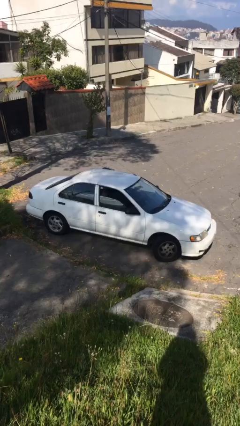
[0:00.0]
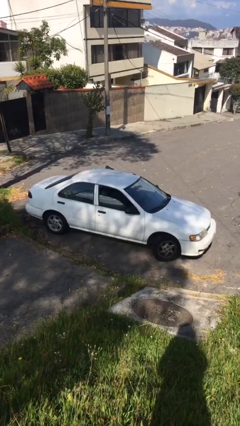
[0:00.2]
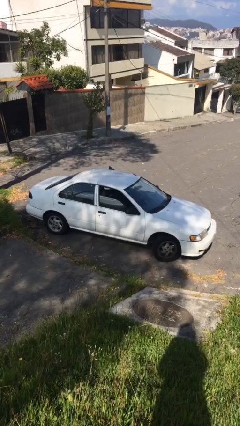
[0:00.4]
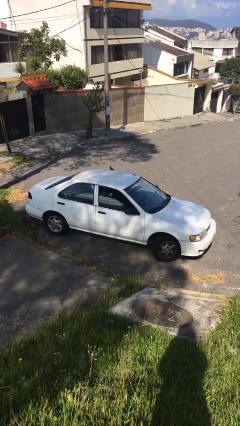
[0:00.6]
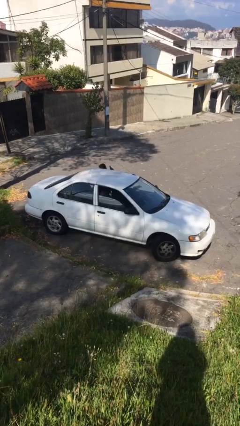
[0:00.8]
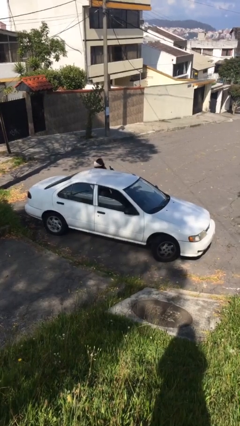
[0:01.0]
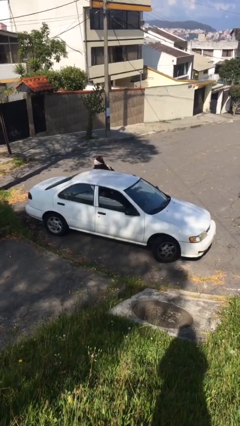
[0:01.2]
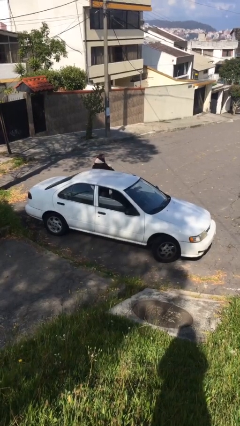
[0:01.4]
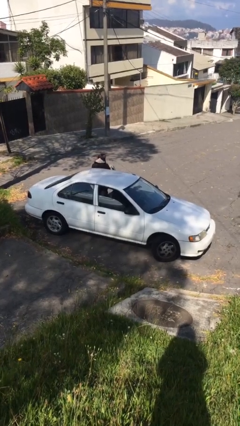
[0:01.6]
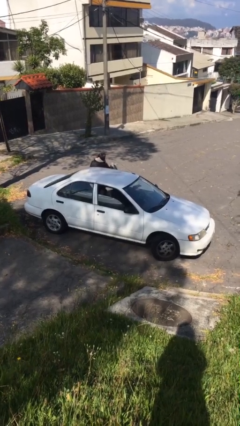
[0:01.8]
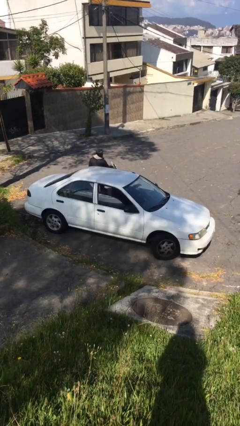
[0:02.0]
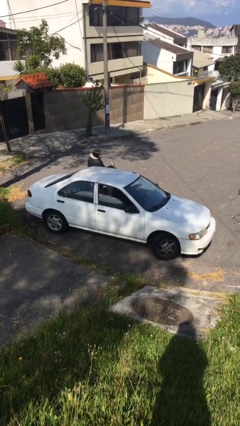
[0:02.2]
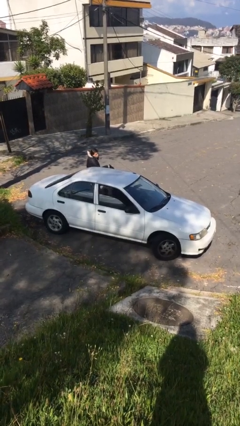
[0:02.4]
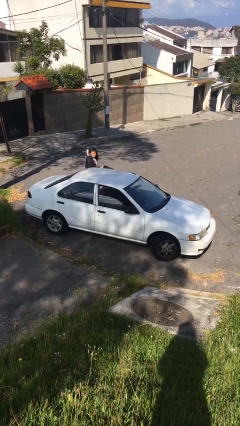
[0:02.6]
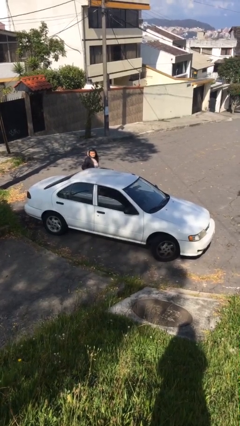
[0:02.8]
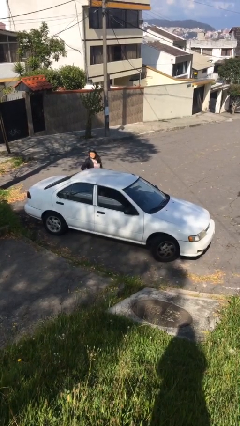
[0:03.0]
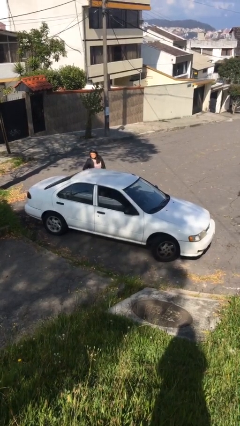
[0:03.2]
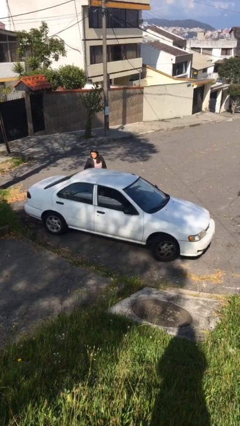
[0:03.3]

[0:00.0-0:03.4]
car drops off person

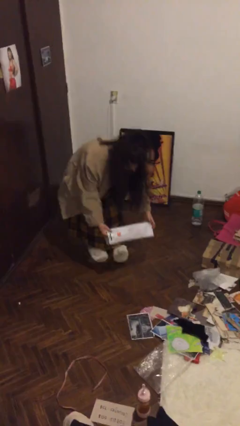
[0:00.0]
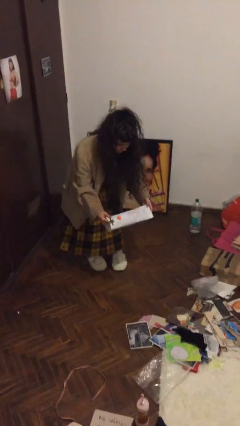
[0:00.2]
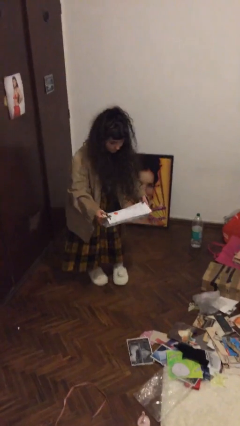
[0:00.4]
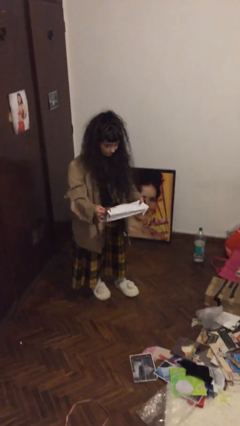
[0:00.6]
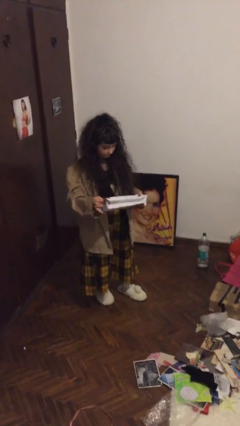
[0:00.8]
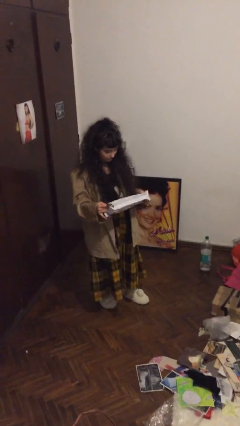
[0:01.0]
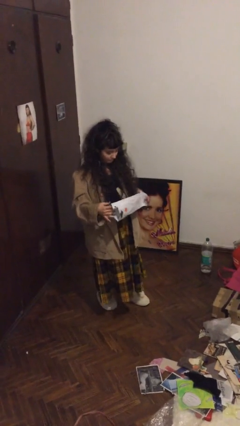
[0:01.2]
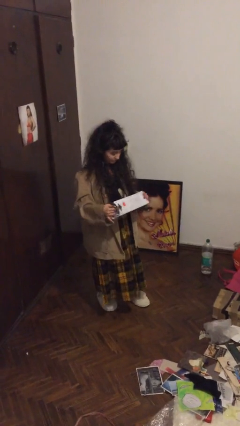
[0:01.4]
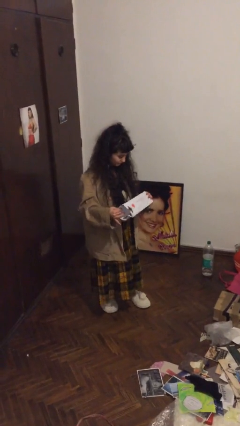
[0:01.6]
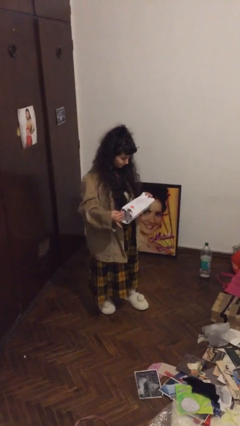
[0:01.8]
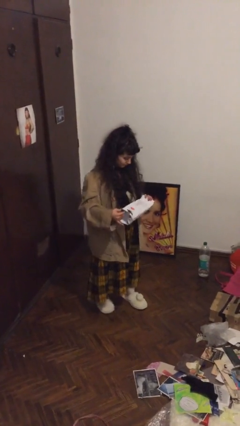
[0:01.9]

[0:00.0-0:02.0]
person picks up object from floor

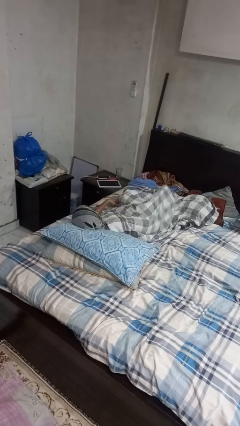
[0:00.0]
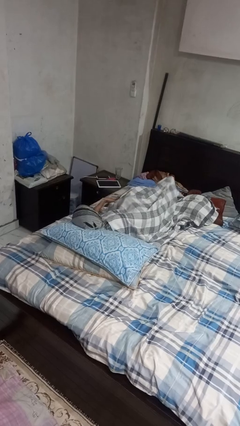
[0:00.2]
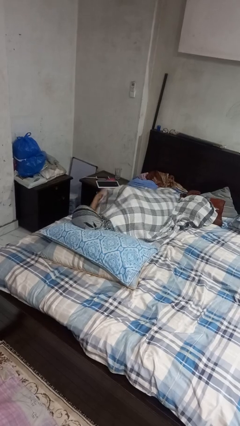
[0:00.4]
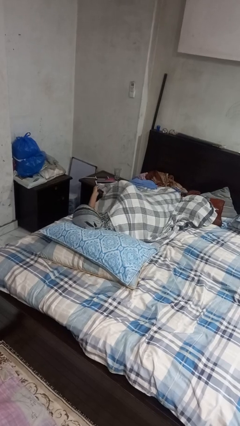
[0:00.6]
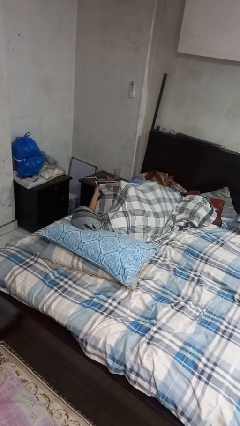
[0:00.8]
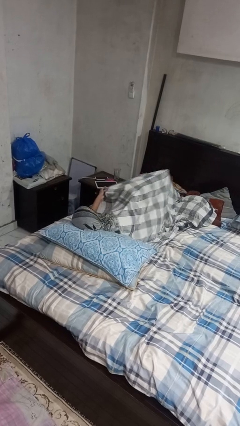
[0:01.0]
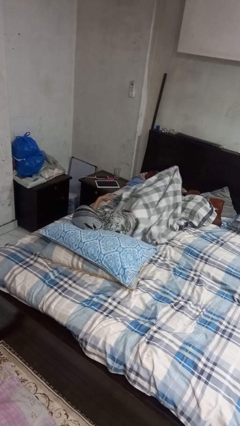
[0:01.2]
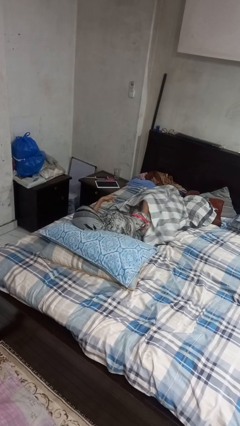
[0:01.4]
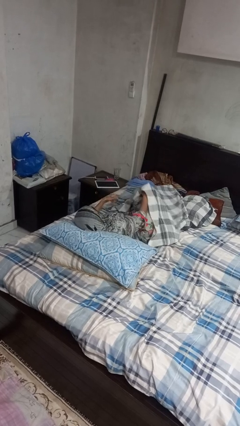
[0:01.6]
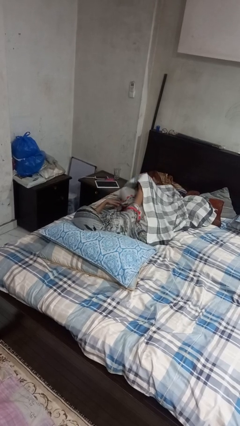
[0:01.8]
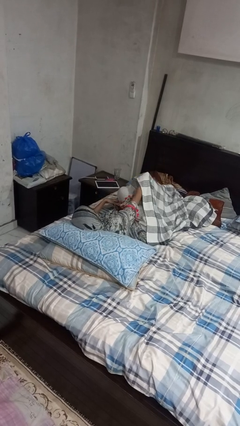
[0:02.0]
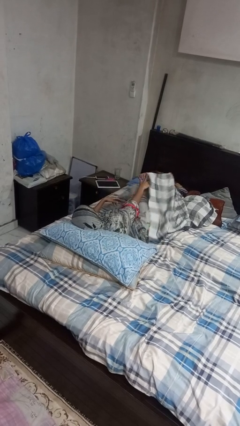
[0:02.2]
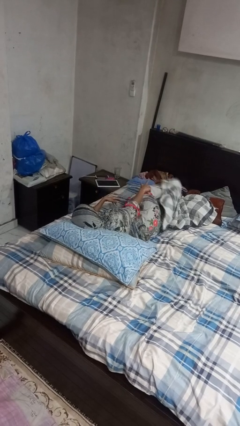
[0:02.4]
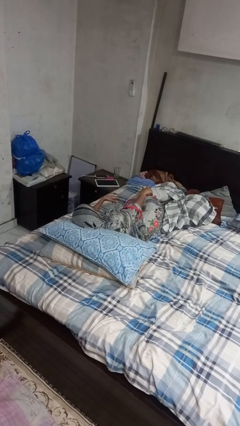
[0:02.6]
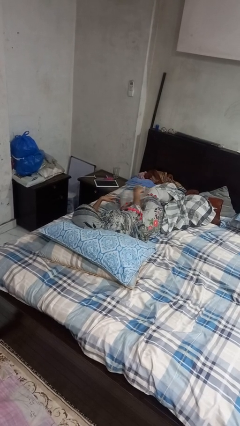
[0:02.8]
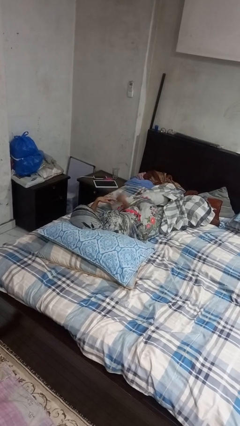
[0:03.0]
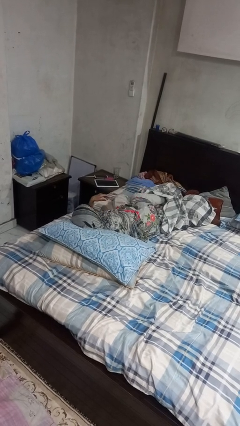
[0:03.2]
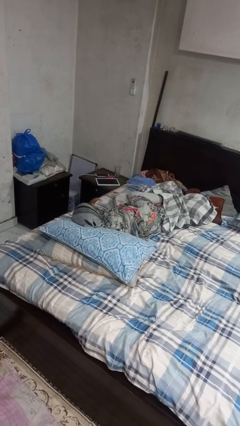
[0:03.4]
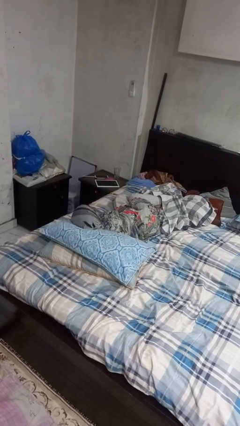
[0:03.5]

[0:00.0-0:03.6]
person uncovers with bedsheets

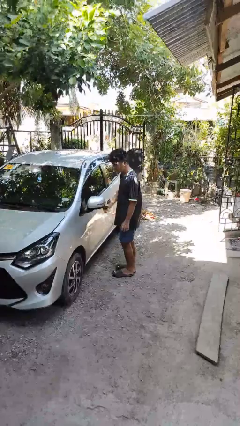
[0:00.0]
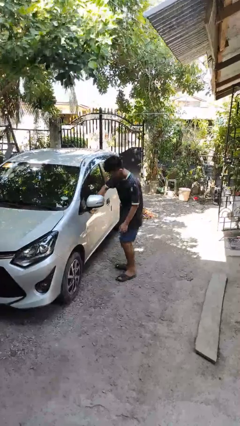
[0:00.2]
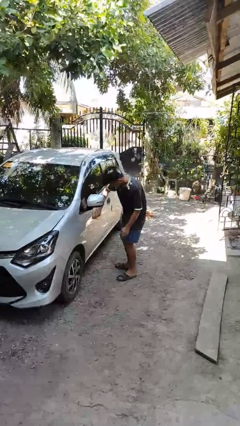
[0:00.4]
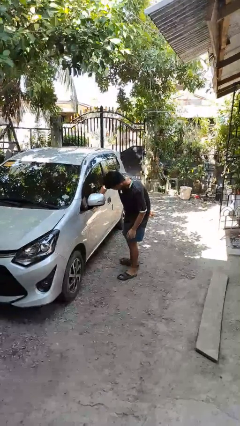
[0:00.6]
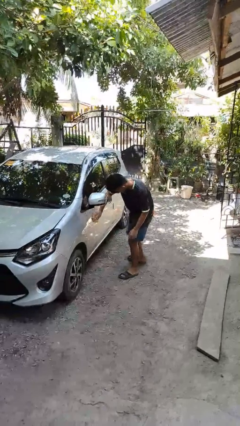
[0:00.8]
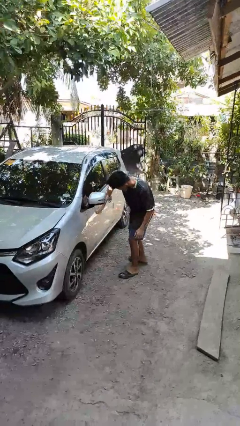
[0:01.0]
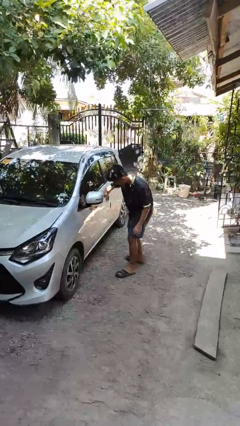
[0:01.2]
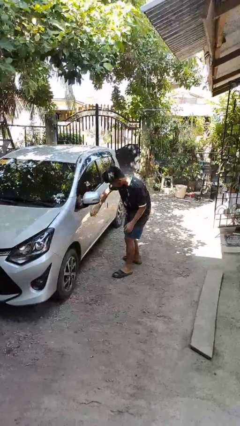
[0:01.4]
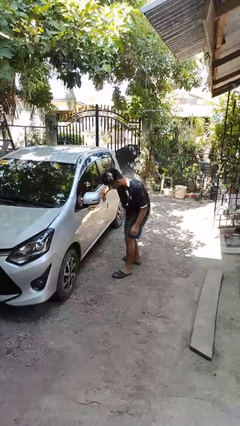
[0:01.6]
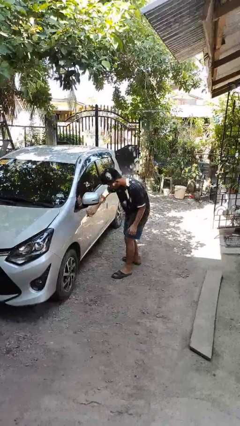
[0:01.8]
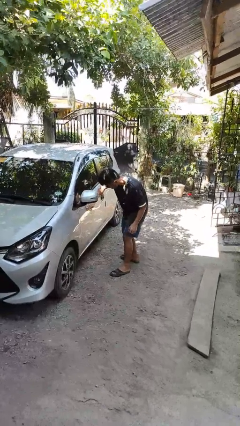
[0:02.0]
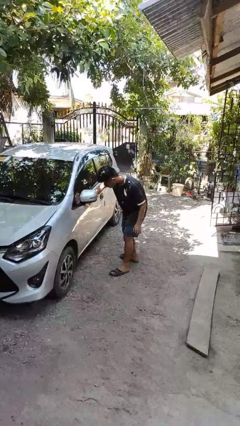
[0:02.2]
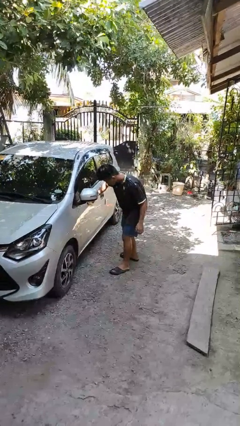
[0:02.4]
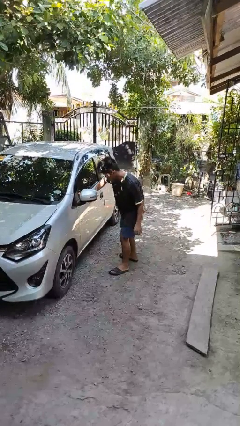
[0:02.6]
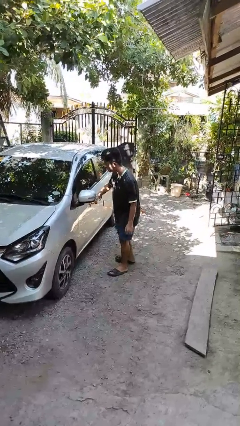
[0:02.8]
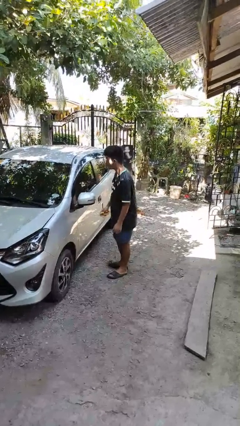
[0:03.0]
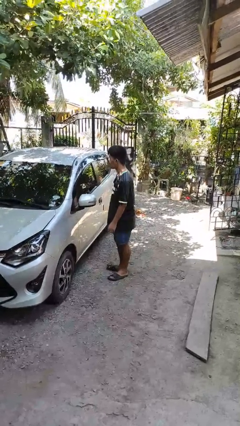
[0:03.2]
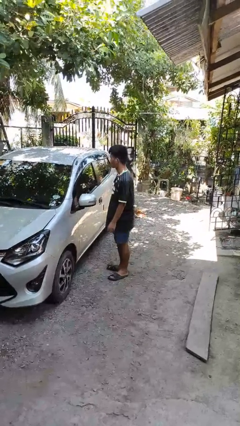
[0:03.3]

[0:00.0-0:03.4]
person polishes car with rag

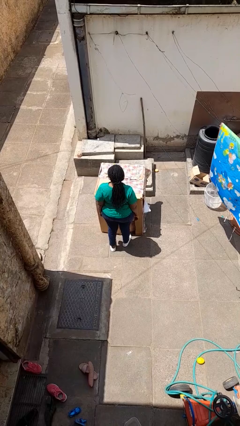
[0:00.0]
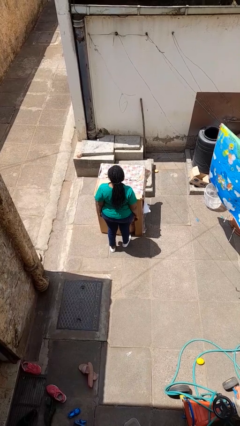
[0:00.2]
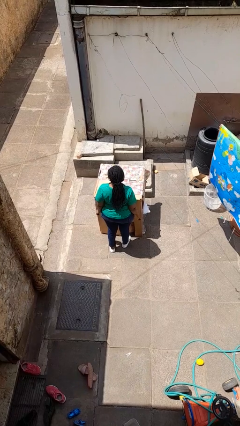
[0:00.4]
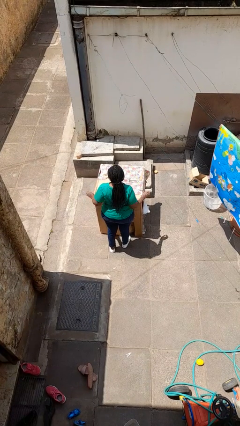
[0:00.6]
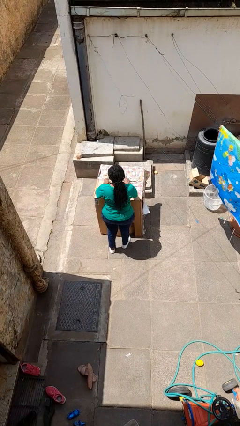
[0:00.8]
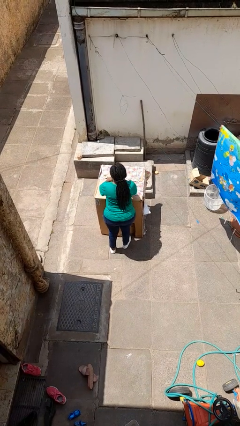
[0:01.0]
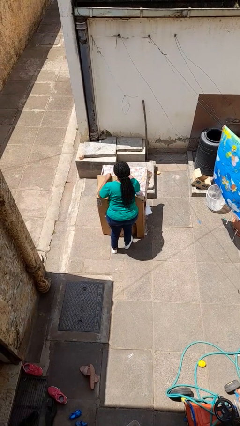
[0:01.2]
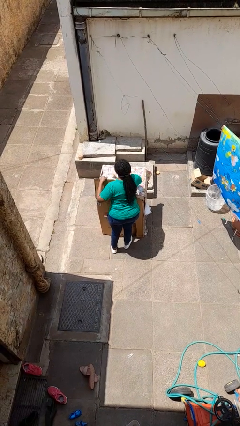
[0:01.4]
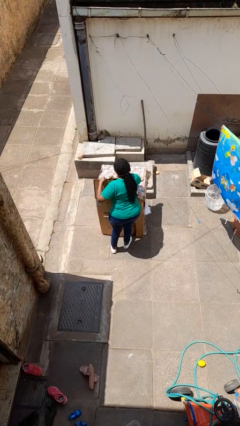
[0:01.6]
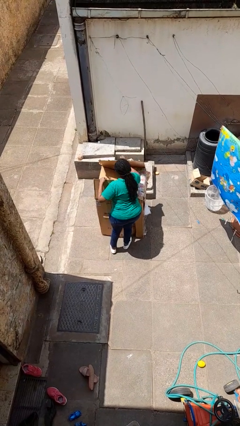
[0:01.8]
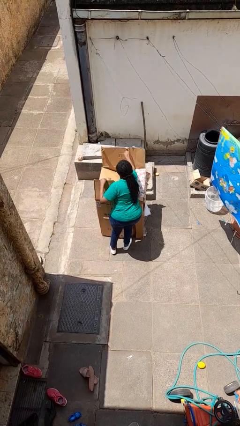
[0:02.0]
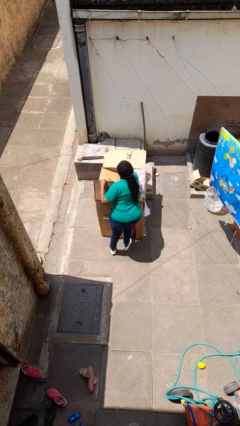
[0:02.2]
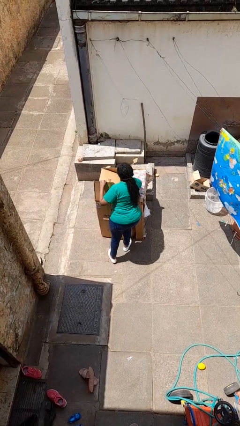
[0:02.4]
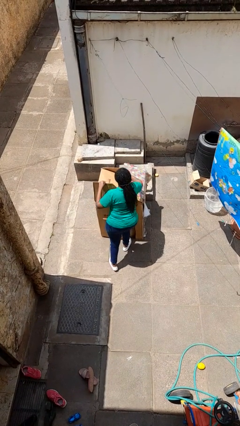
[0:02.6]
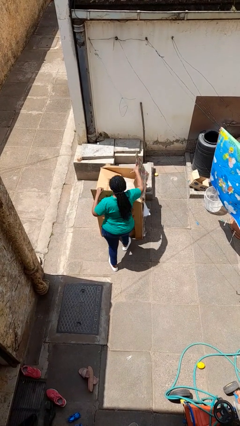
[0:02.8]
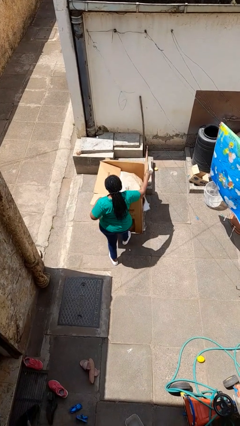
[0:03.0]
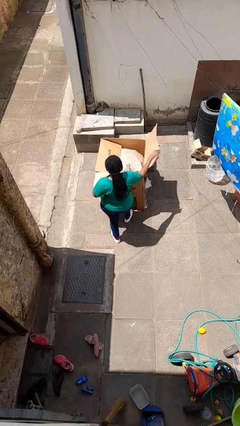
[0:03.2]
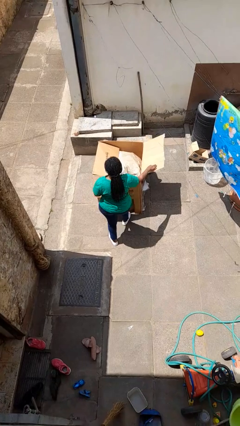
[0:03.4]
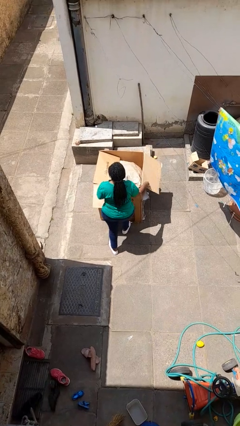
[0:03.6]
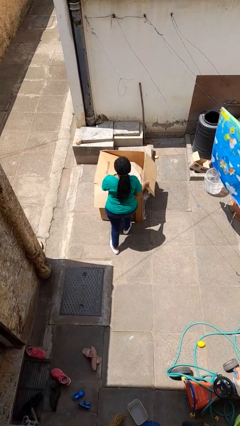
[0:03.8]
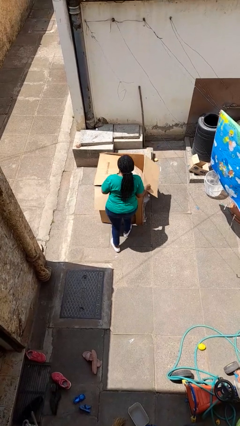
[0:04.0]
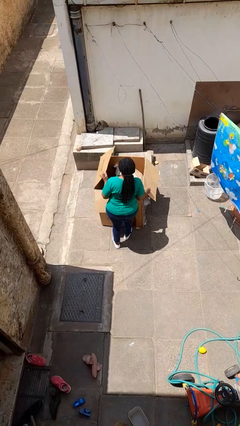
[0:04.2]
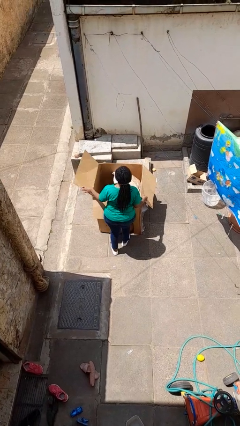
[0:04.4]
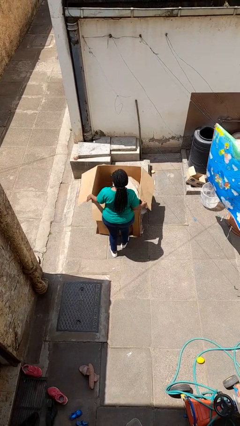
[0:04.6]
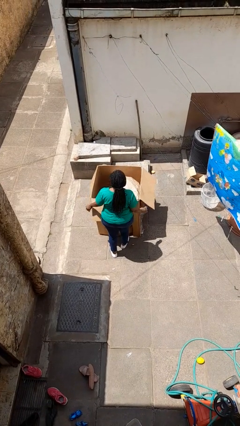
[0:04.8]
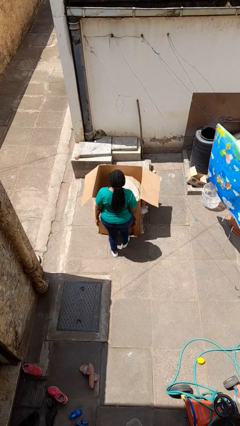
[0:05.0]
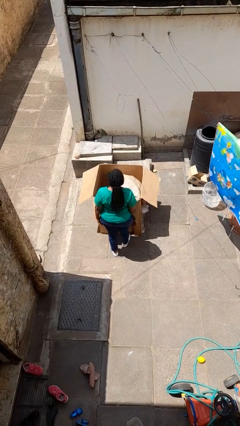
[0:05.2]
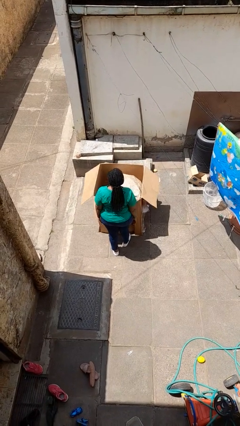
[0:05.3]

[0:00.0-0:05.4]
person opens box
